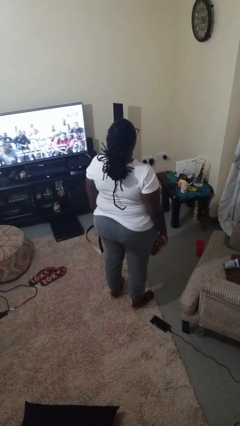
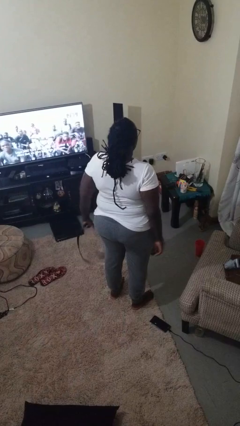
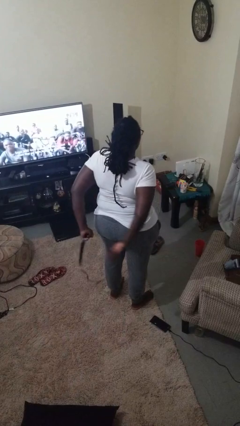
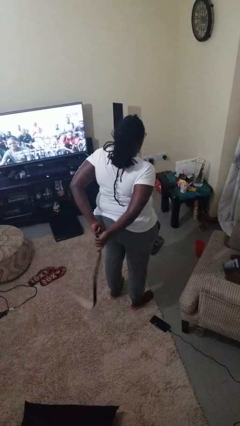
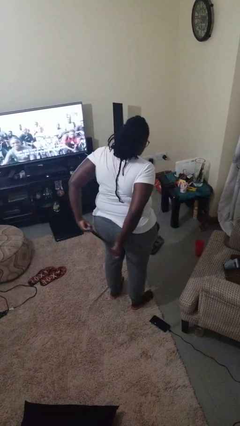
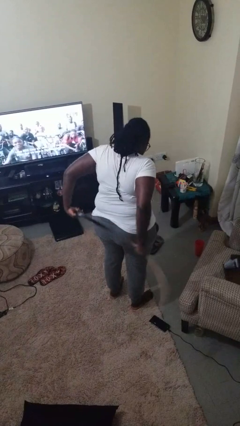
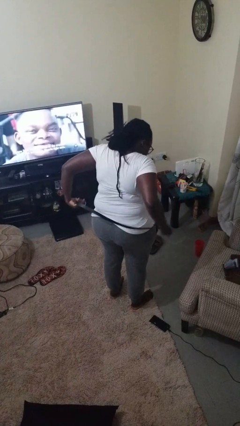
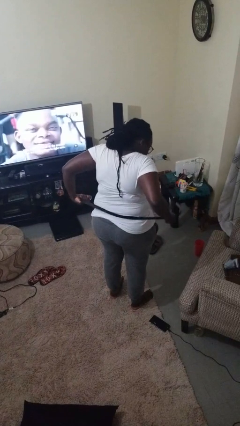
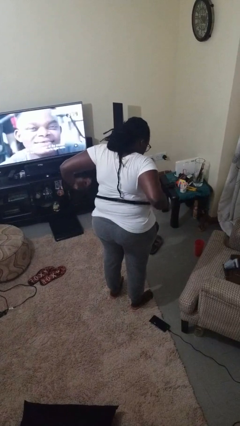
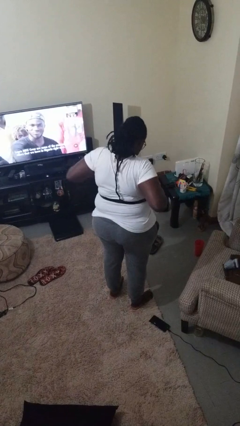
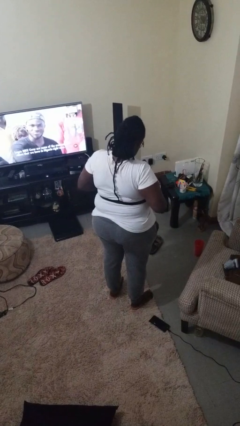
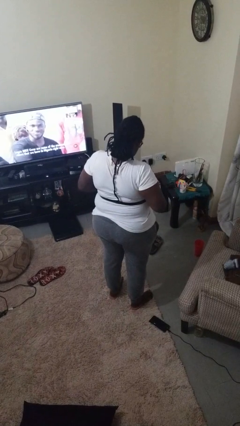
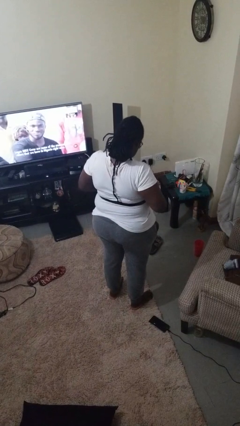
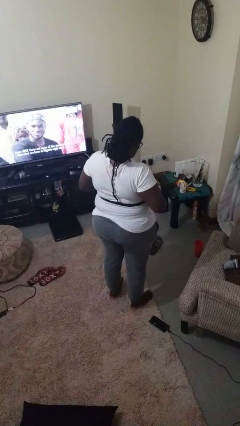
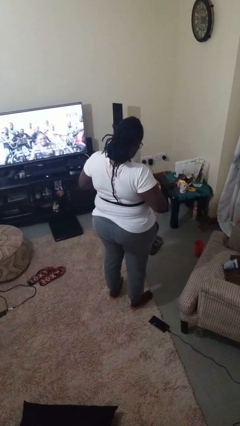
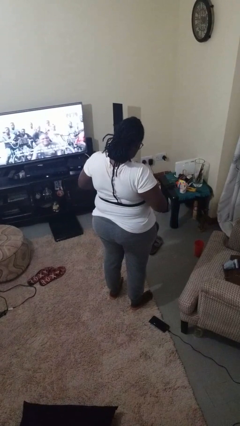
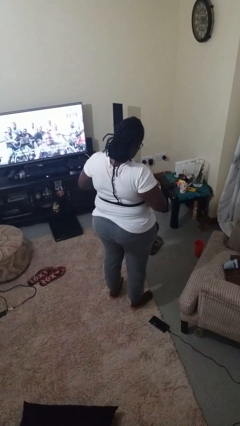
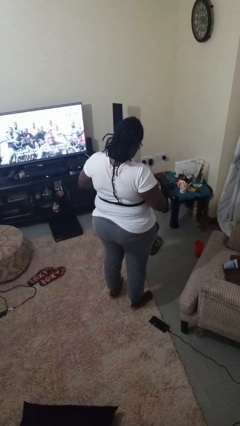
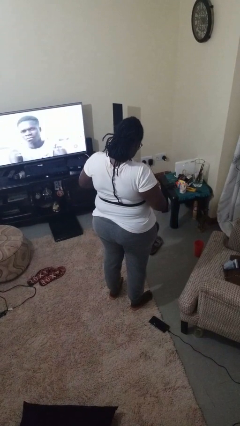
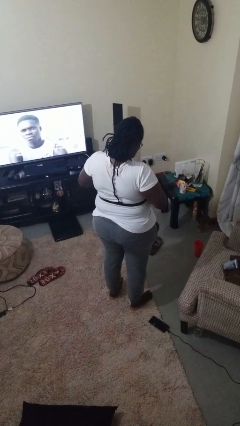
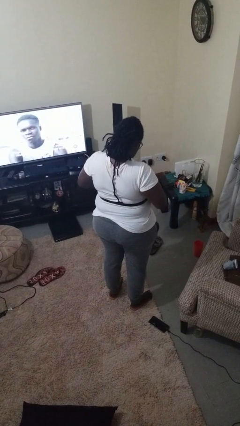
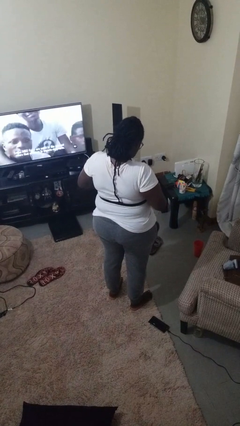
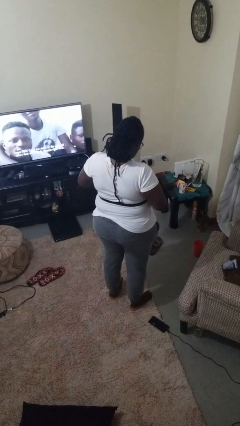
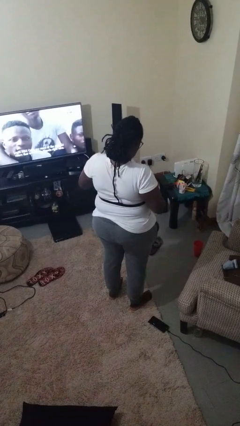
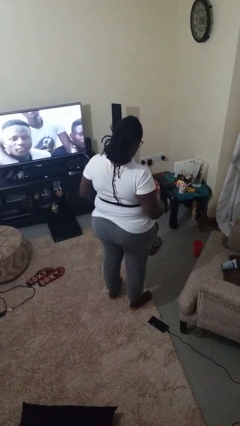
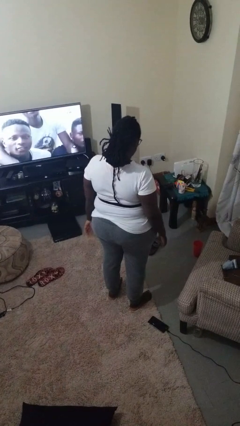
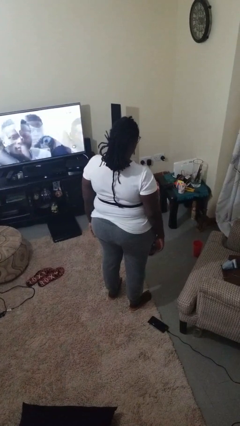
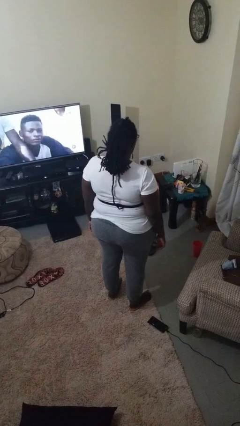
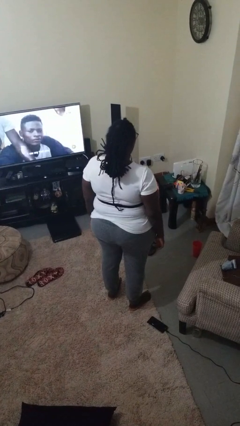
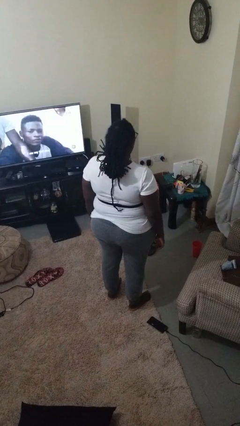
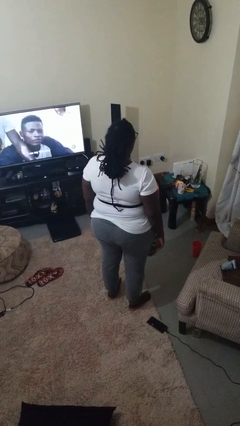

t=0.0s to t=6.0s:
person puts on belt

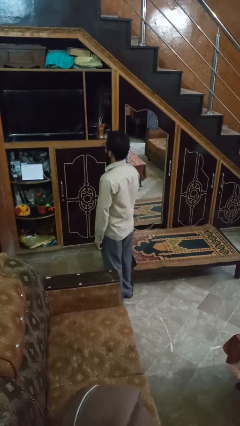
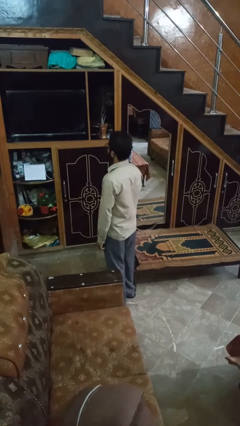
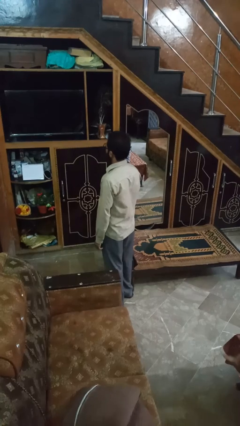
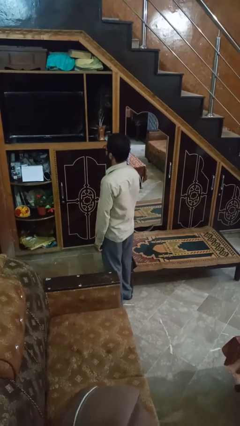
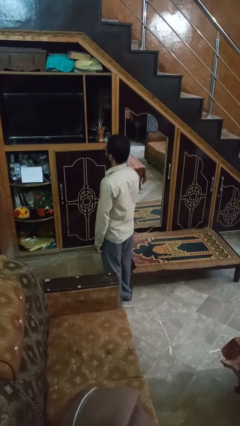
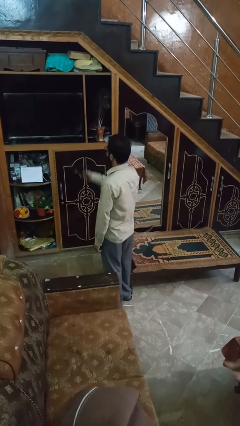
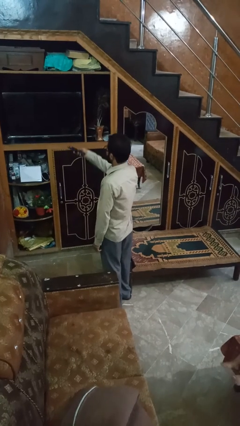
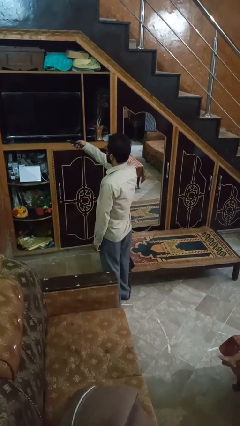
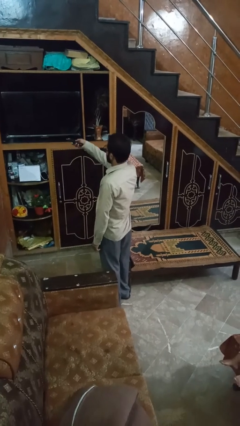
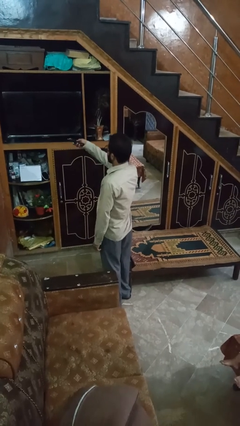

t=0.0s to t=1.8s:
person uses television remote

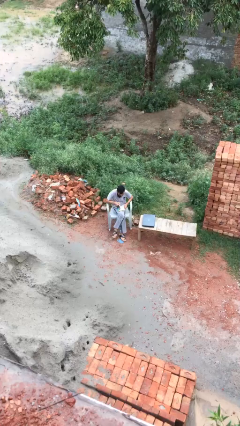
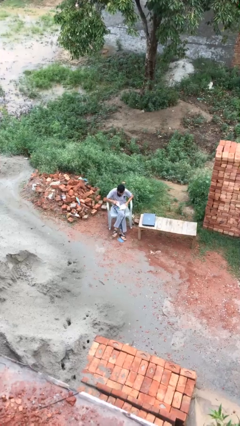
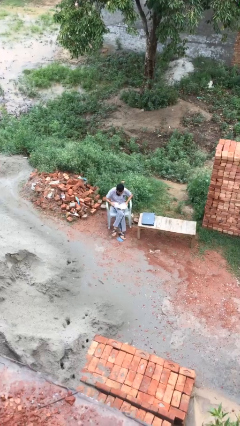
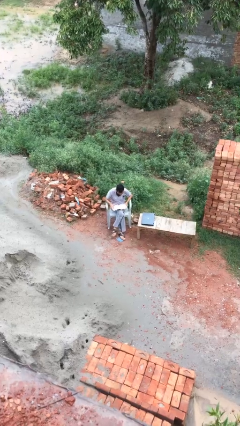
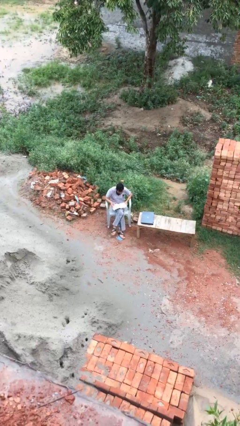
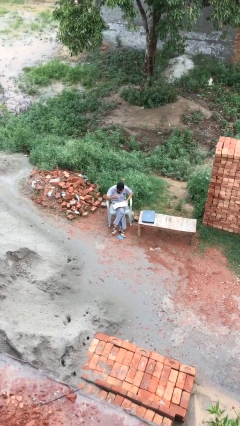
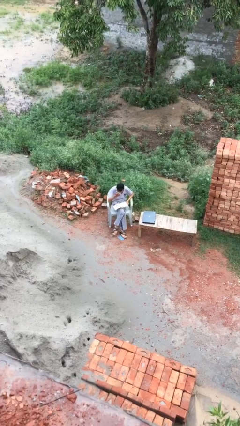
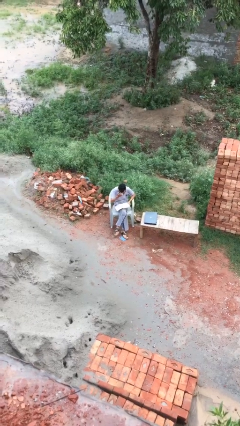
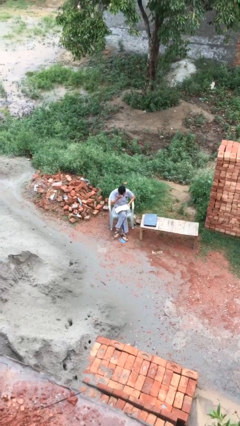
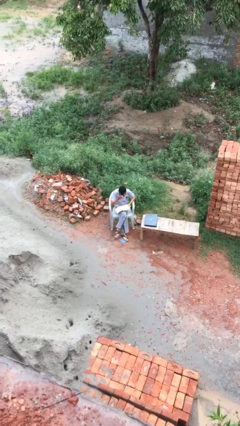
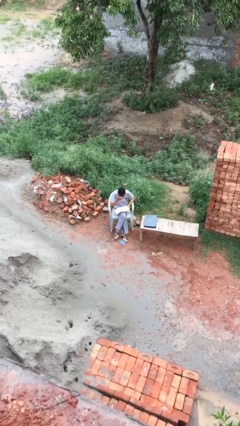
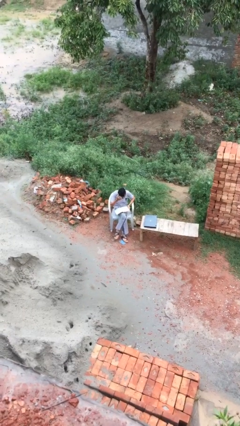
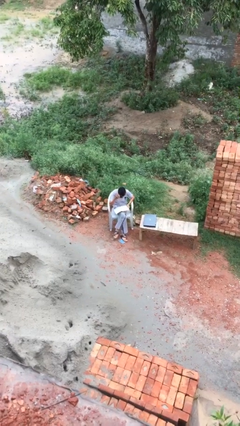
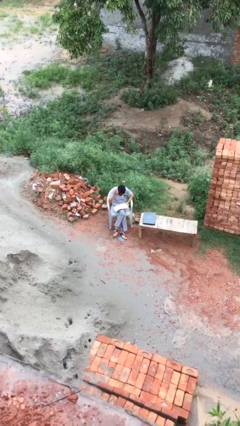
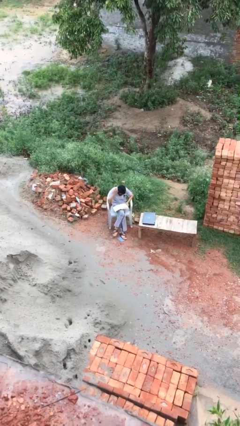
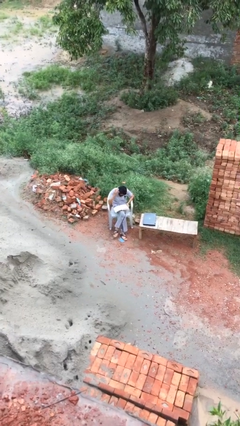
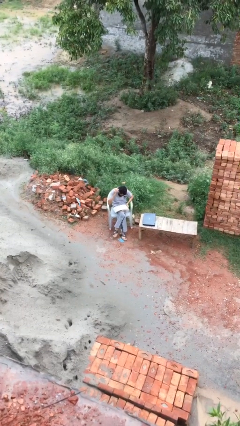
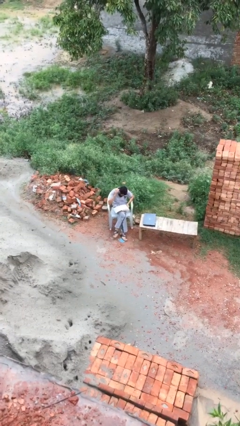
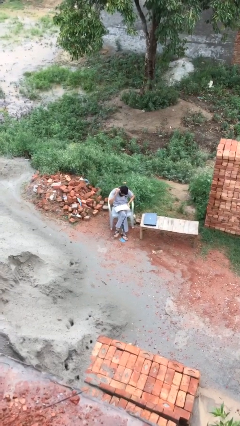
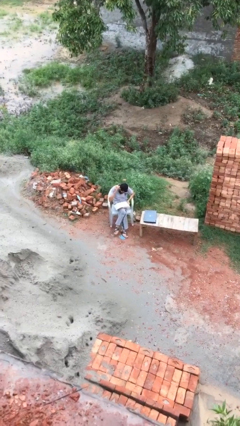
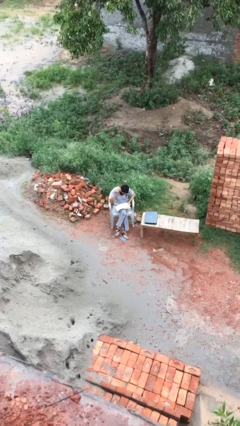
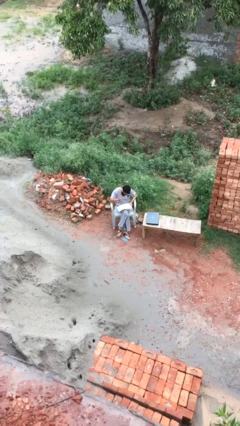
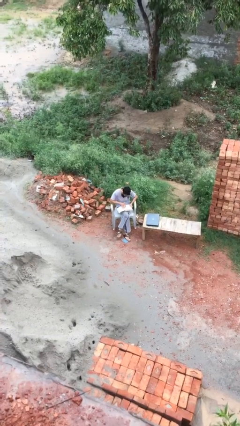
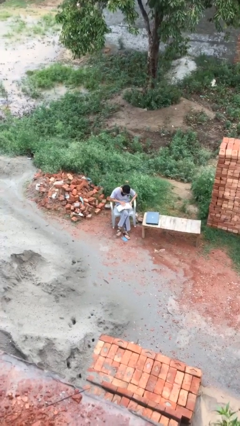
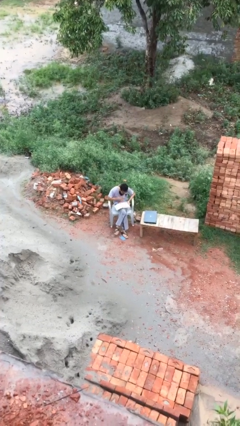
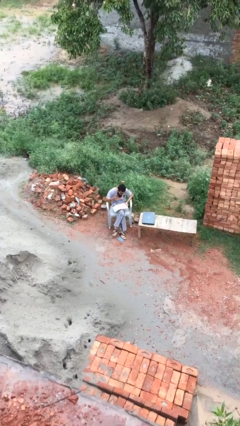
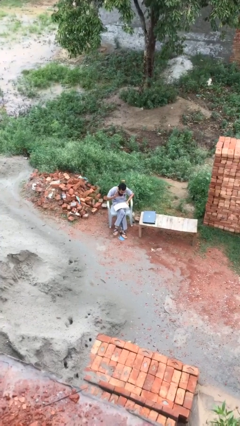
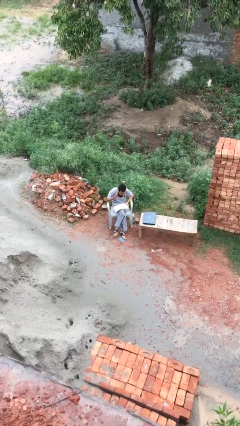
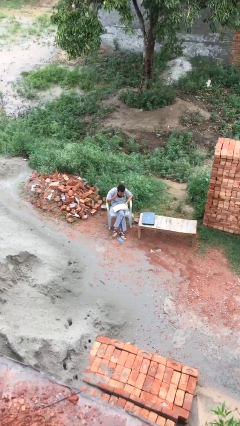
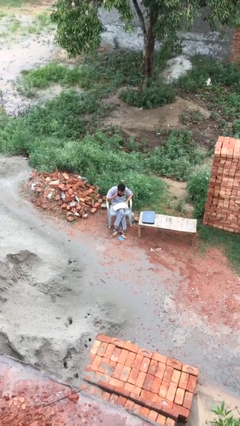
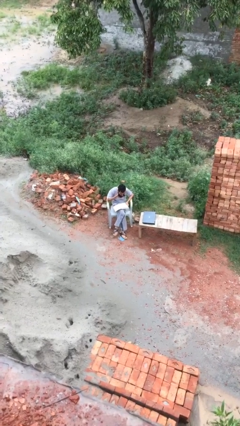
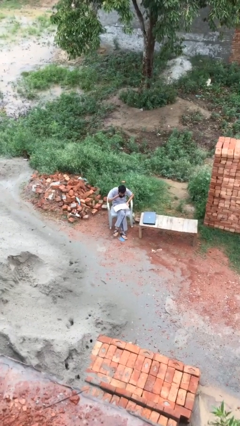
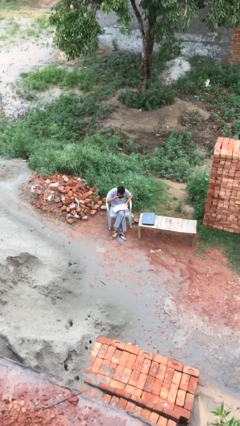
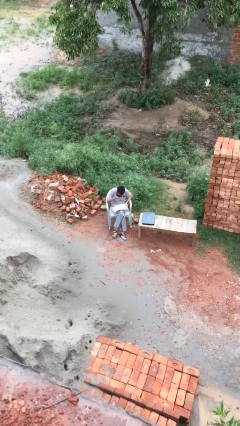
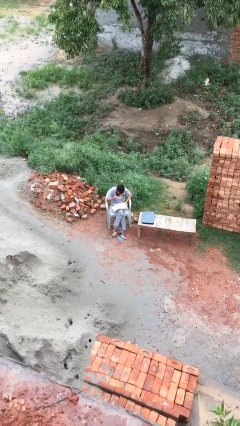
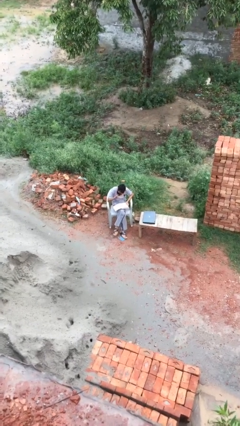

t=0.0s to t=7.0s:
person reads document

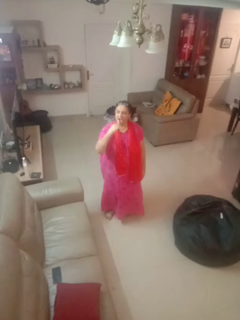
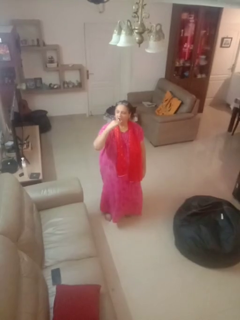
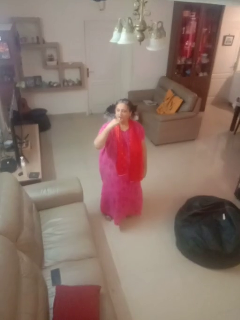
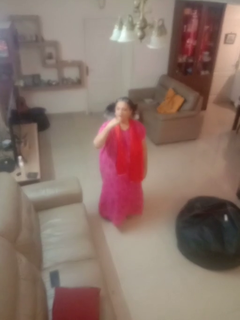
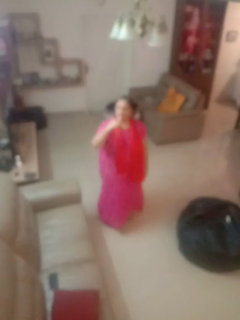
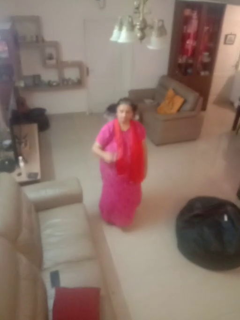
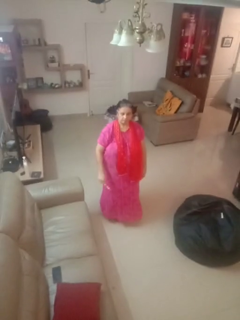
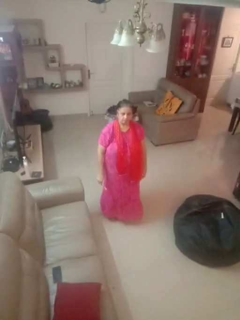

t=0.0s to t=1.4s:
person brushes teeth

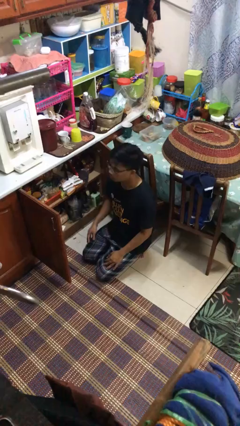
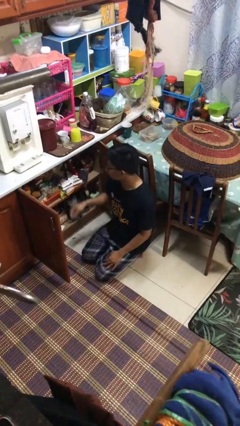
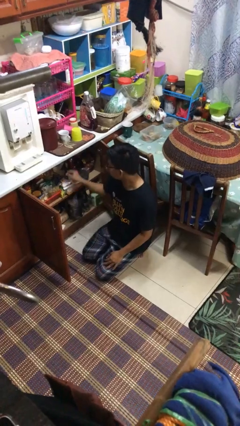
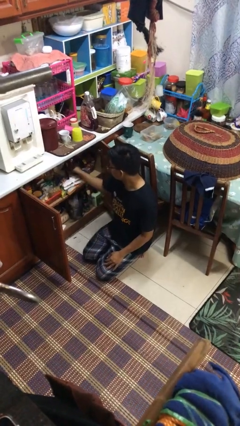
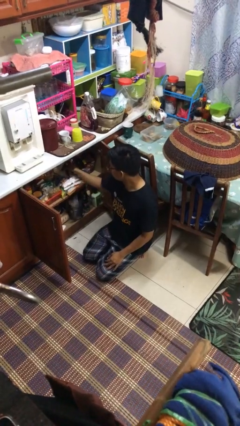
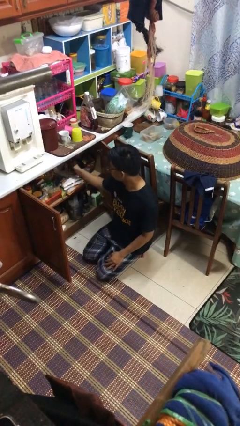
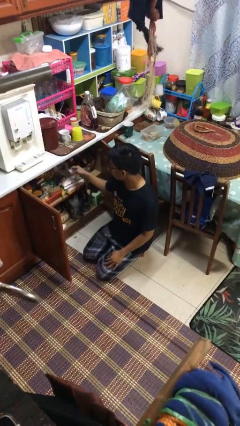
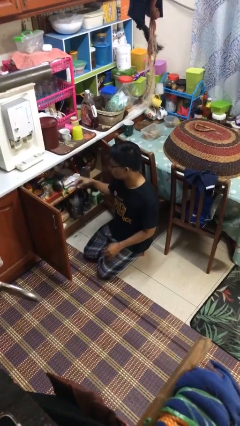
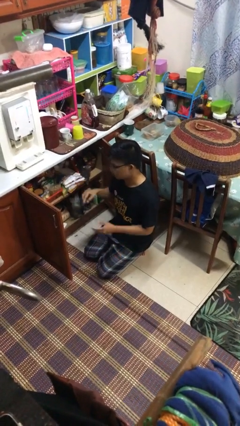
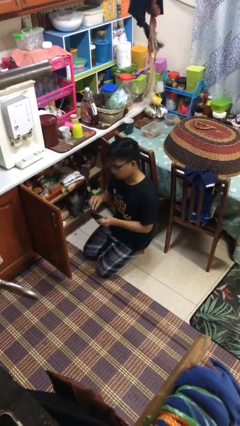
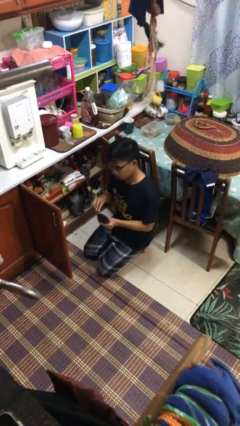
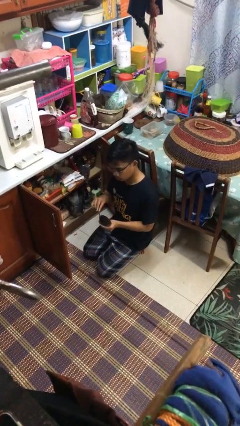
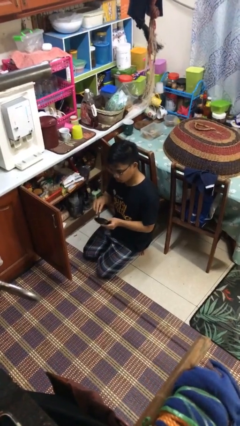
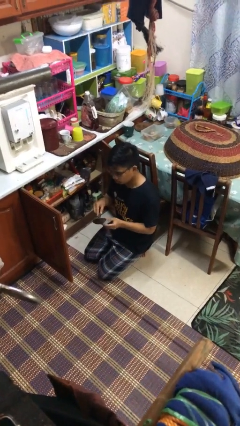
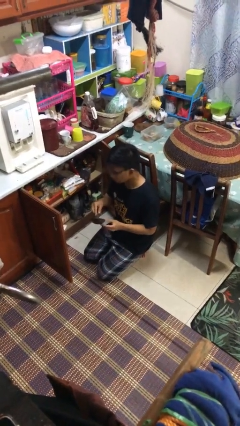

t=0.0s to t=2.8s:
person takes object from kitchen drawer
